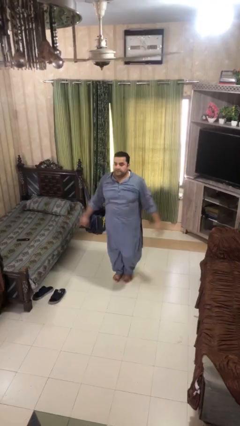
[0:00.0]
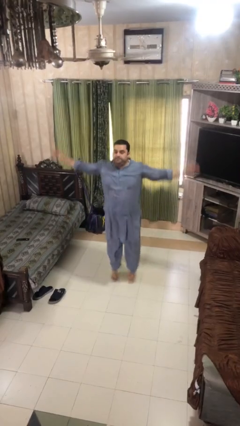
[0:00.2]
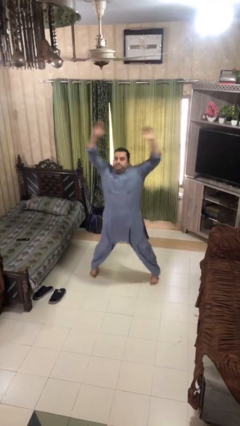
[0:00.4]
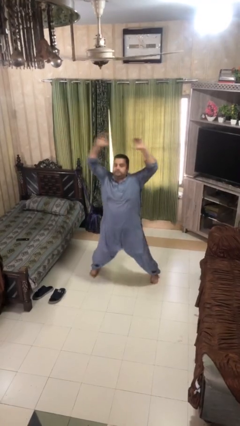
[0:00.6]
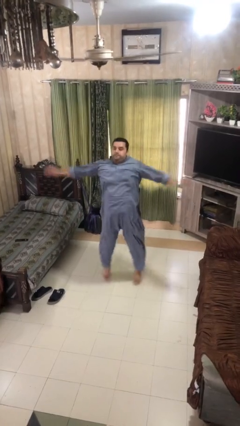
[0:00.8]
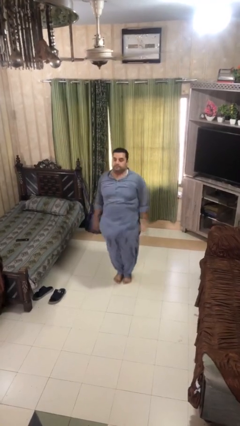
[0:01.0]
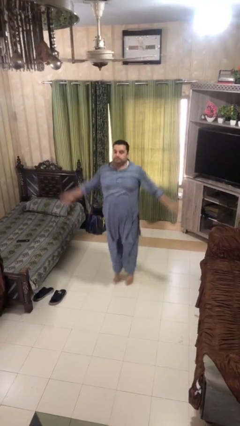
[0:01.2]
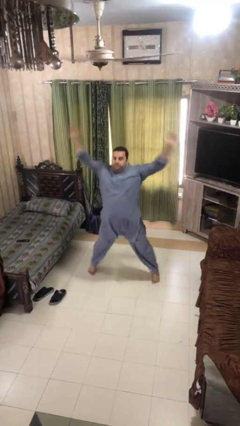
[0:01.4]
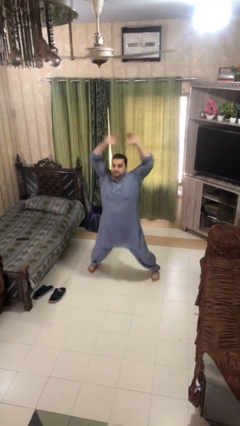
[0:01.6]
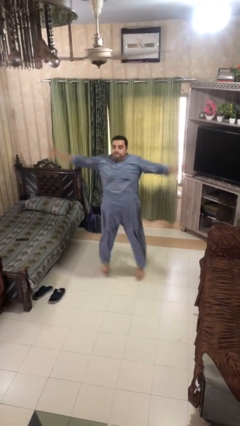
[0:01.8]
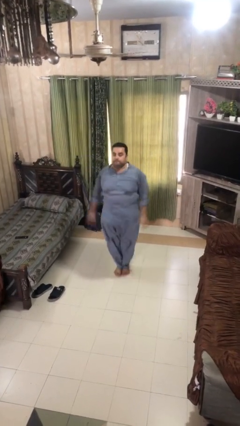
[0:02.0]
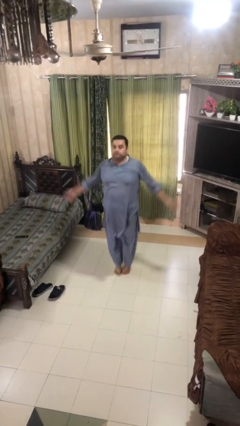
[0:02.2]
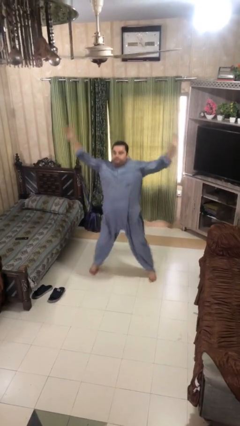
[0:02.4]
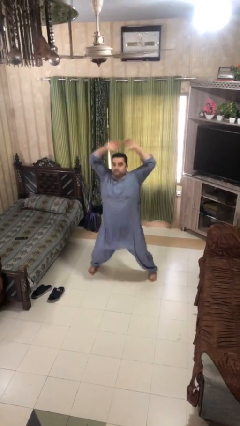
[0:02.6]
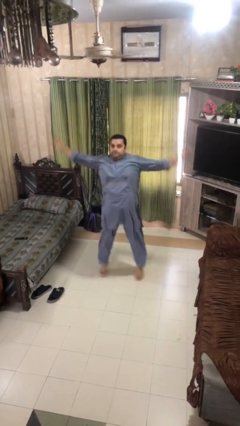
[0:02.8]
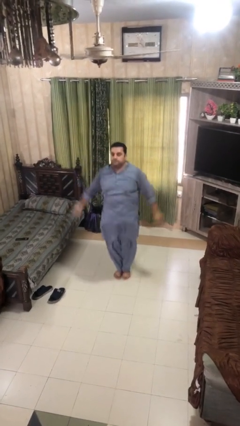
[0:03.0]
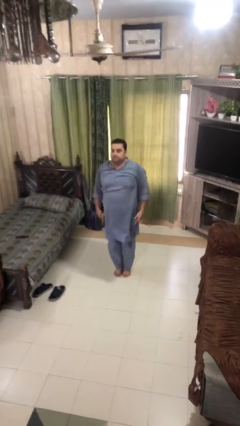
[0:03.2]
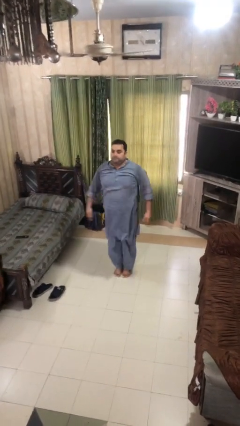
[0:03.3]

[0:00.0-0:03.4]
person exercises with jumping jacks

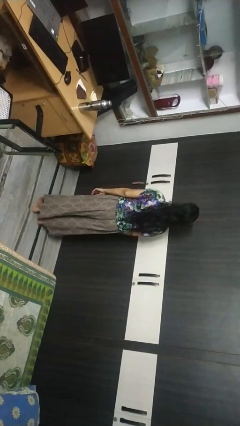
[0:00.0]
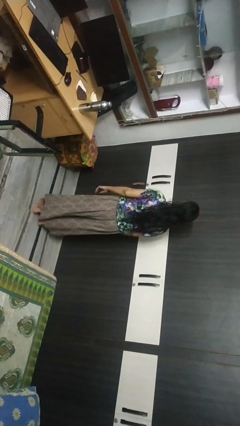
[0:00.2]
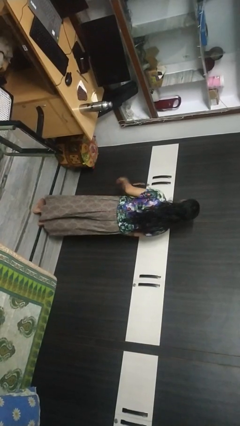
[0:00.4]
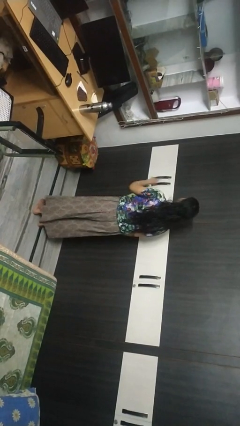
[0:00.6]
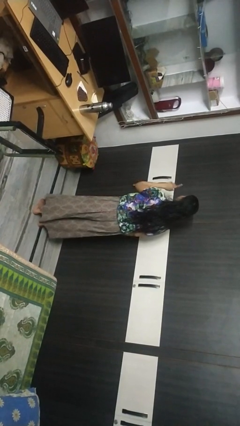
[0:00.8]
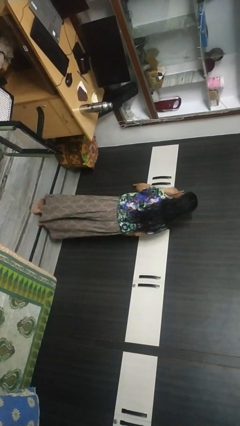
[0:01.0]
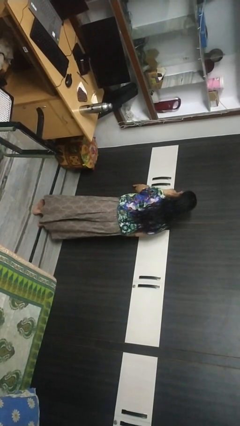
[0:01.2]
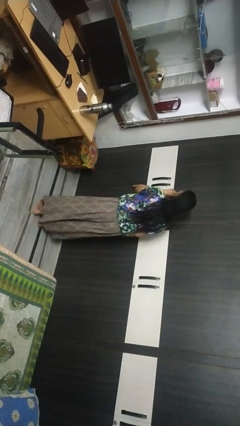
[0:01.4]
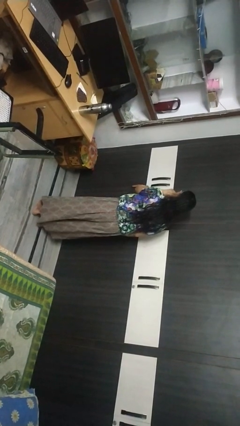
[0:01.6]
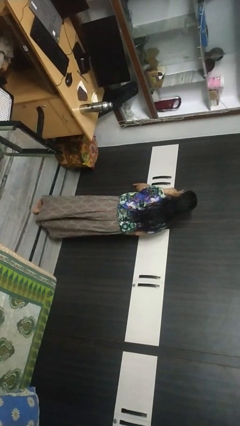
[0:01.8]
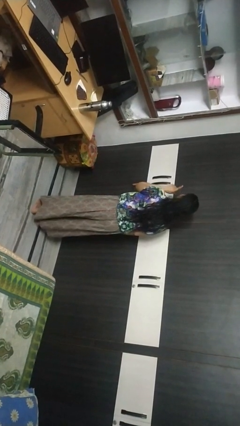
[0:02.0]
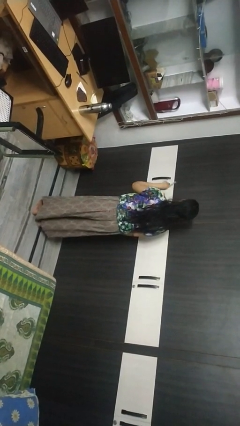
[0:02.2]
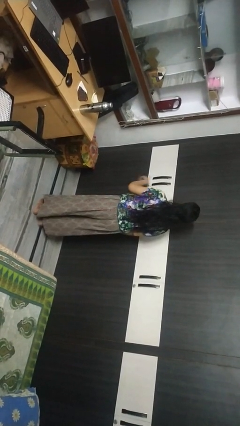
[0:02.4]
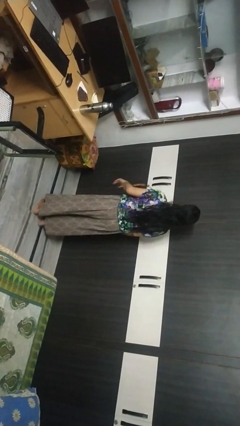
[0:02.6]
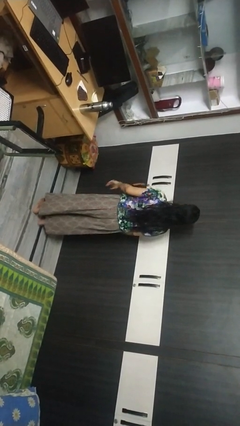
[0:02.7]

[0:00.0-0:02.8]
person gestures be quiet

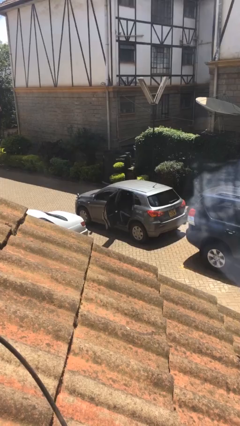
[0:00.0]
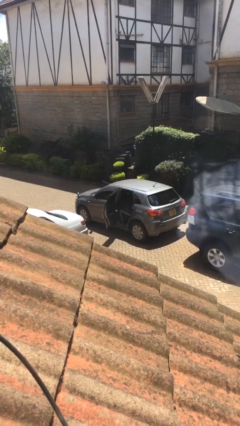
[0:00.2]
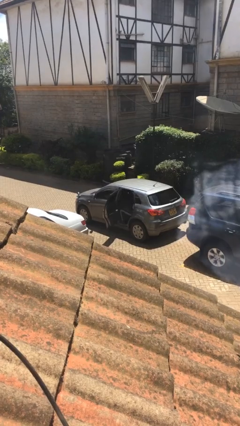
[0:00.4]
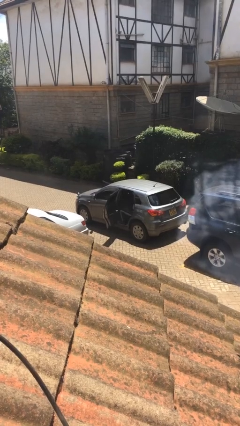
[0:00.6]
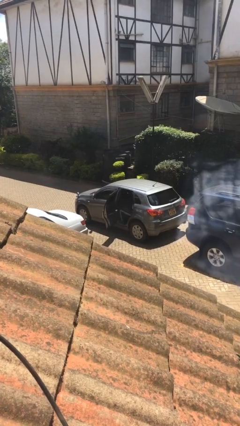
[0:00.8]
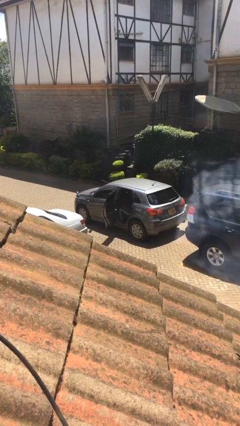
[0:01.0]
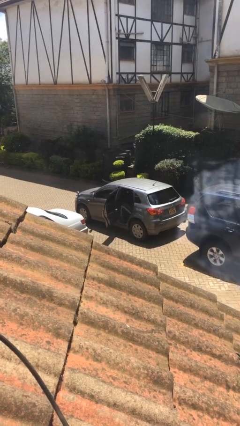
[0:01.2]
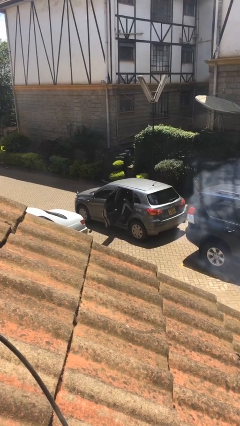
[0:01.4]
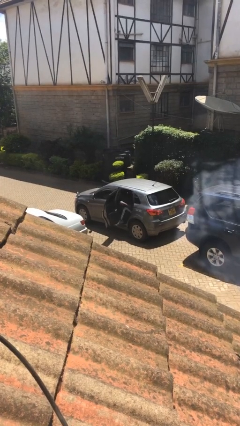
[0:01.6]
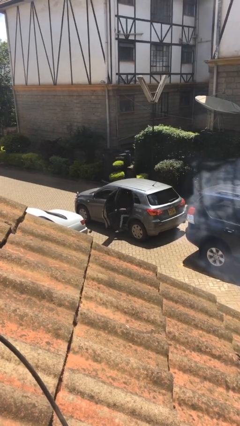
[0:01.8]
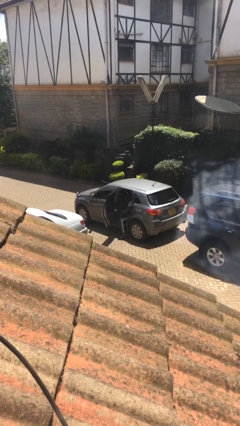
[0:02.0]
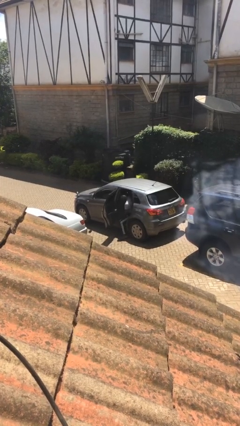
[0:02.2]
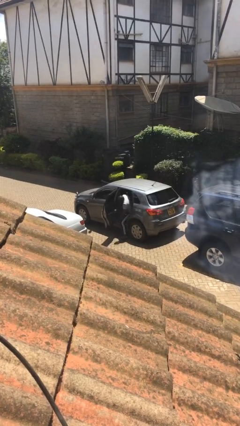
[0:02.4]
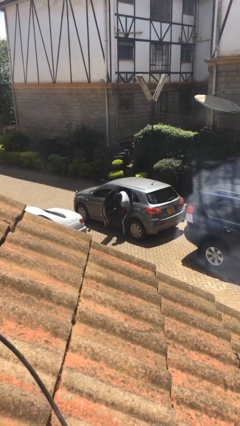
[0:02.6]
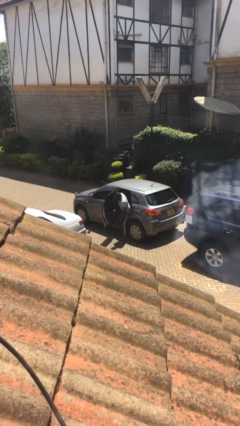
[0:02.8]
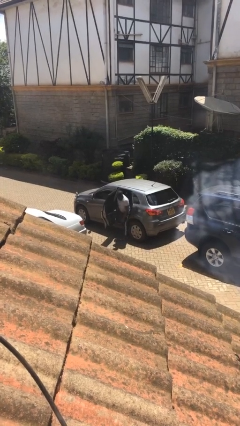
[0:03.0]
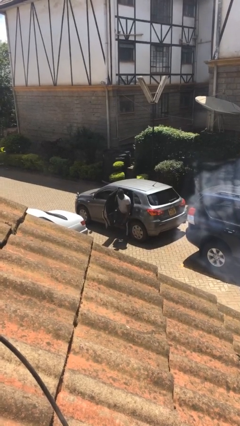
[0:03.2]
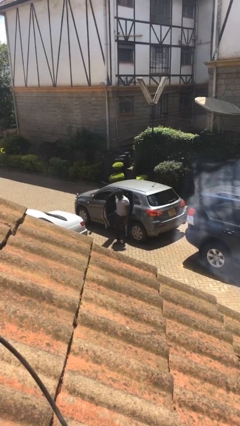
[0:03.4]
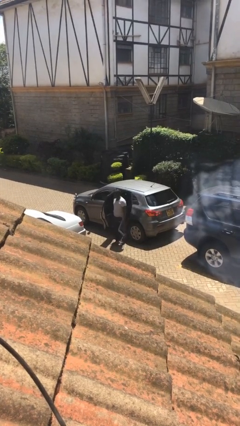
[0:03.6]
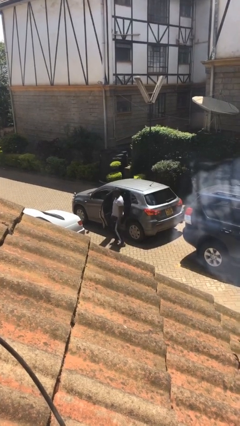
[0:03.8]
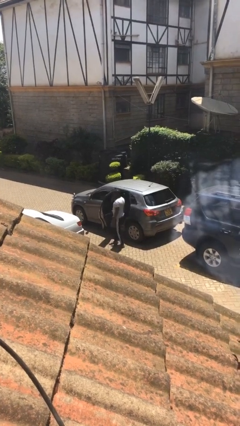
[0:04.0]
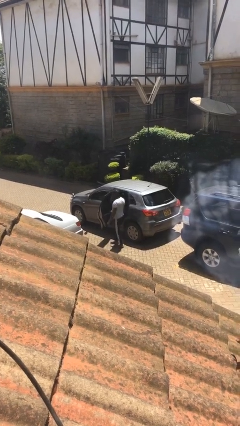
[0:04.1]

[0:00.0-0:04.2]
person exits car

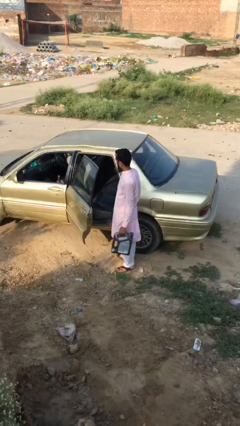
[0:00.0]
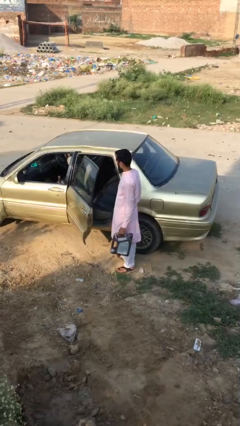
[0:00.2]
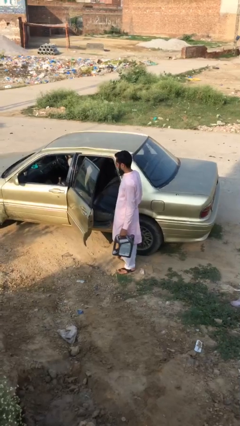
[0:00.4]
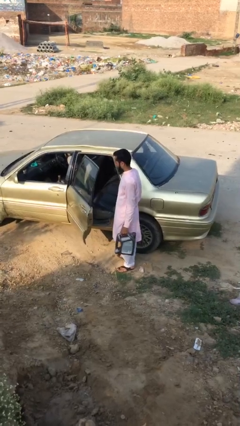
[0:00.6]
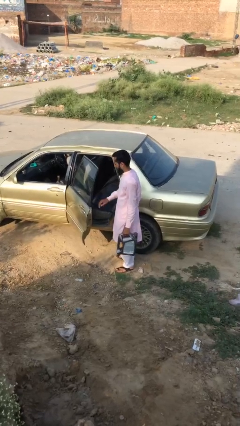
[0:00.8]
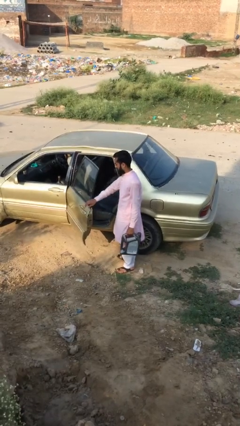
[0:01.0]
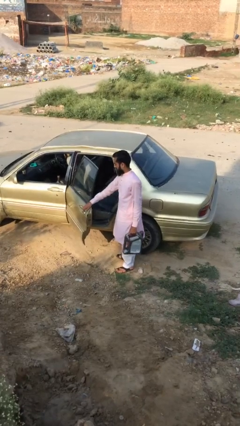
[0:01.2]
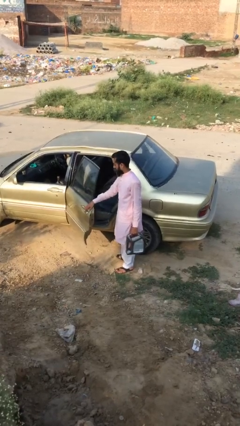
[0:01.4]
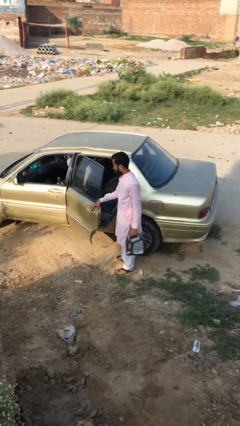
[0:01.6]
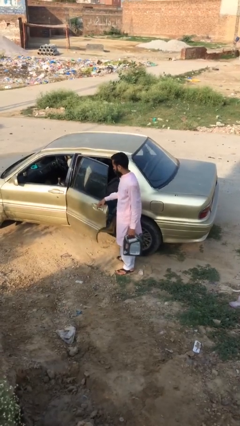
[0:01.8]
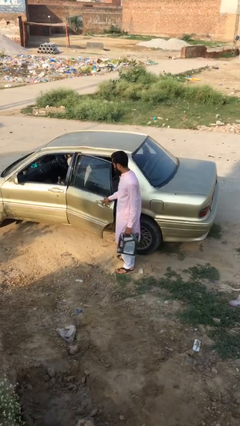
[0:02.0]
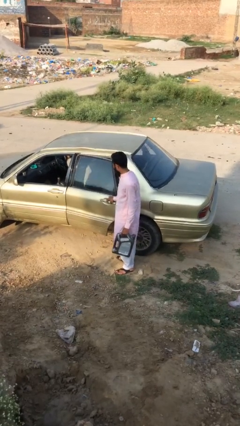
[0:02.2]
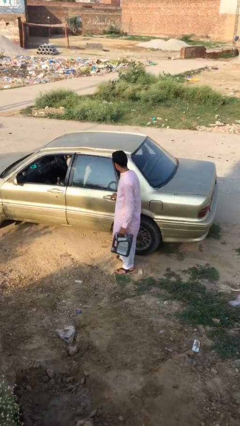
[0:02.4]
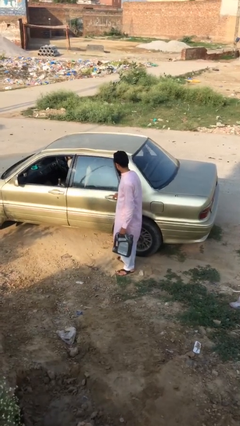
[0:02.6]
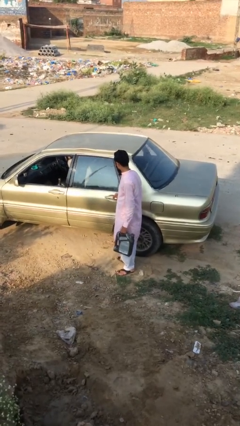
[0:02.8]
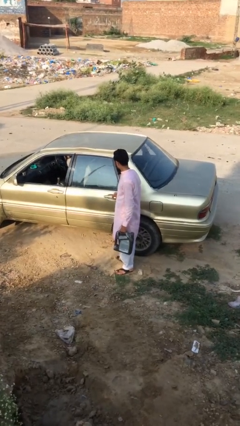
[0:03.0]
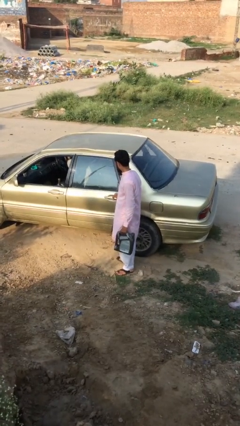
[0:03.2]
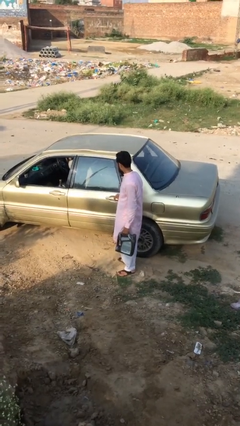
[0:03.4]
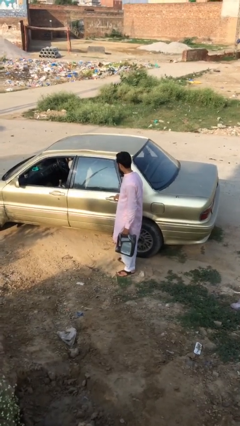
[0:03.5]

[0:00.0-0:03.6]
person closes car door

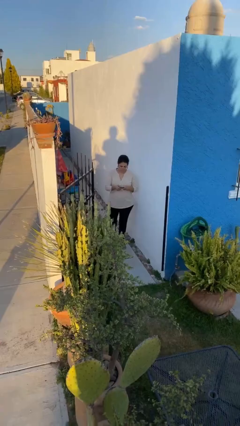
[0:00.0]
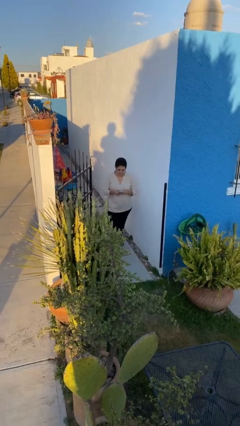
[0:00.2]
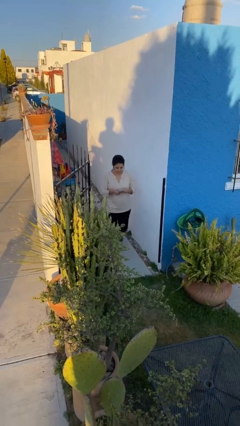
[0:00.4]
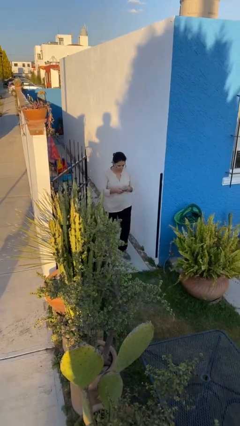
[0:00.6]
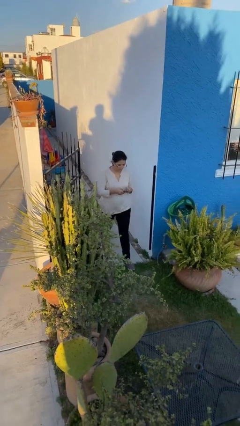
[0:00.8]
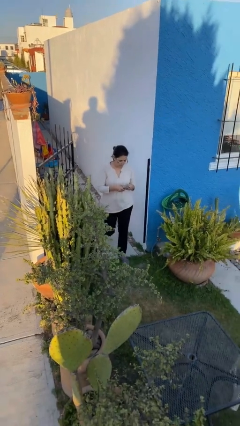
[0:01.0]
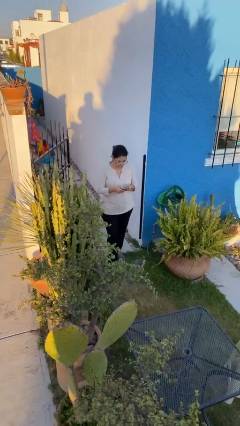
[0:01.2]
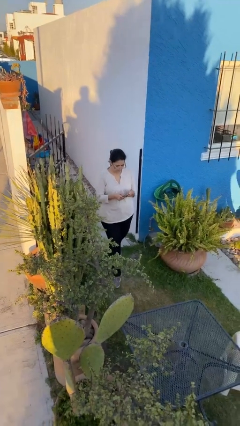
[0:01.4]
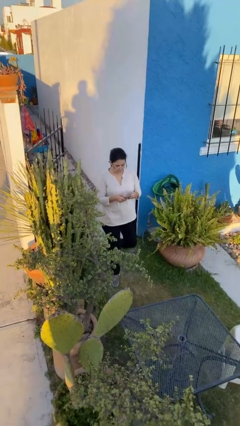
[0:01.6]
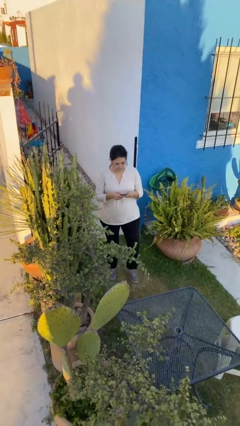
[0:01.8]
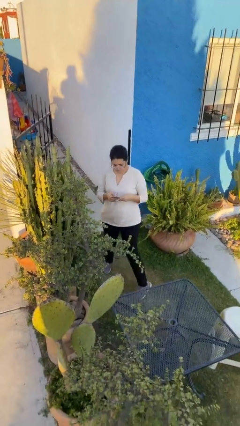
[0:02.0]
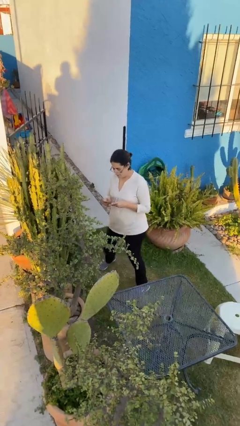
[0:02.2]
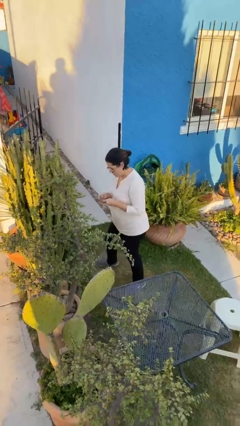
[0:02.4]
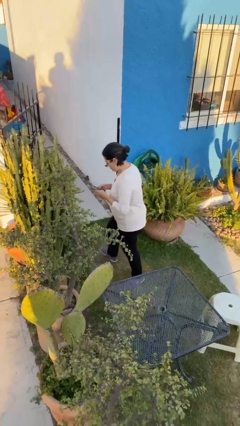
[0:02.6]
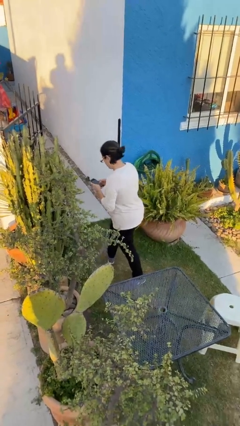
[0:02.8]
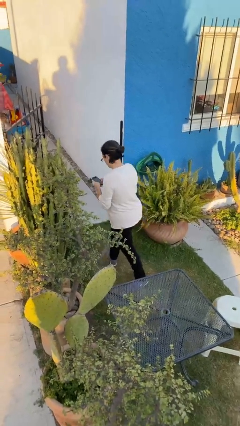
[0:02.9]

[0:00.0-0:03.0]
person enters scene through structure

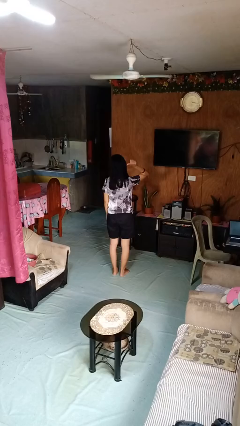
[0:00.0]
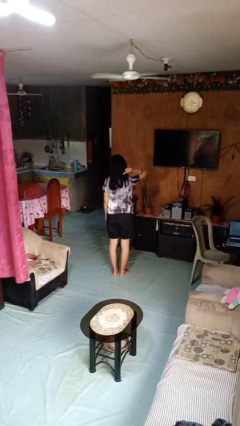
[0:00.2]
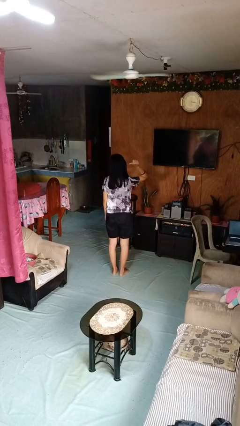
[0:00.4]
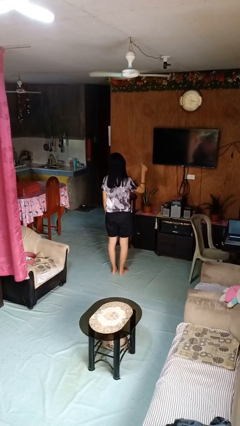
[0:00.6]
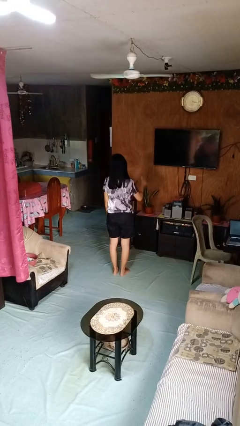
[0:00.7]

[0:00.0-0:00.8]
person gestures behind me
